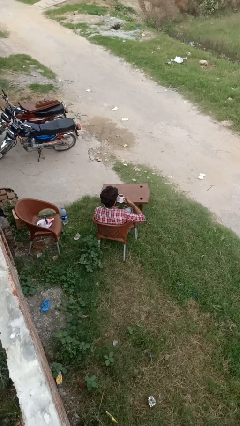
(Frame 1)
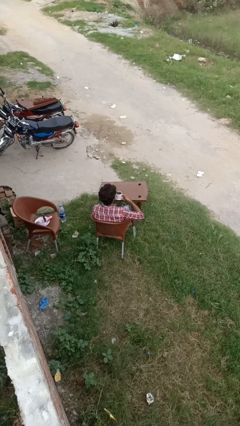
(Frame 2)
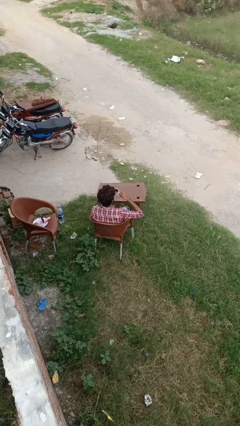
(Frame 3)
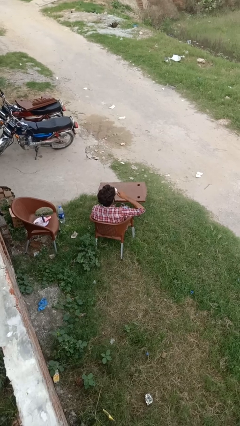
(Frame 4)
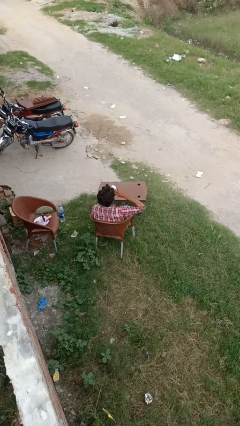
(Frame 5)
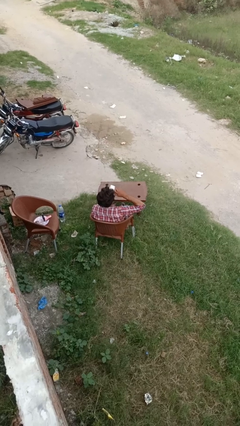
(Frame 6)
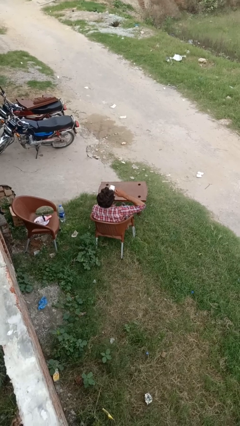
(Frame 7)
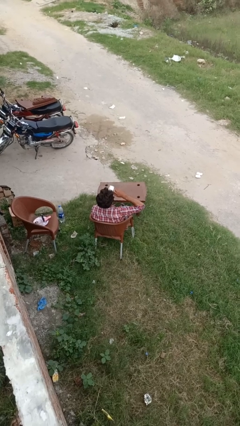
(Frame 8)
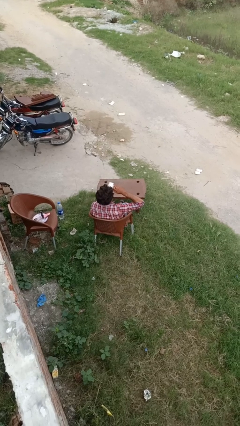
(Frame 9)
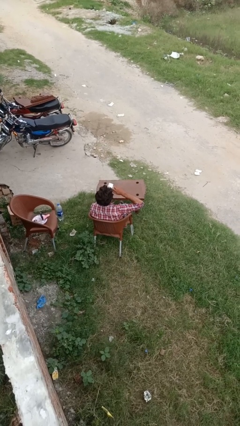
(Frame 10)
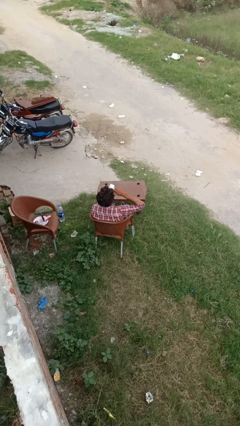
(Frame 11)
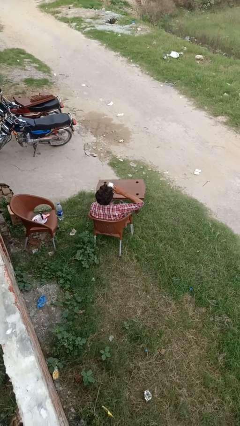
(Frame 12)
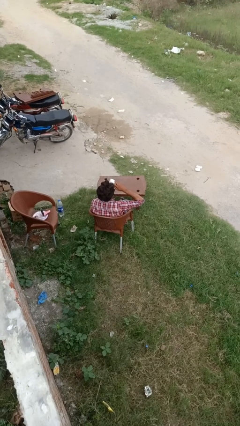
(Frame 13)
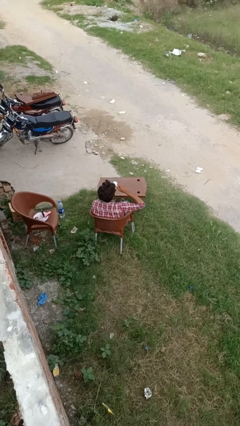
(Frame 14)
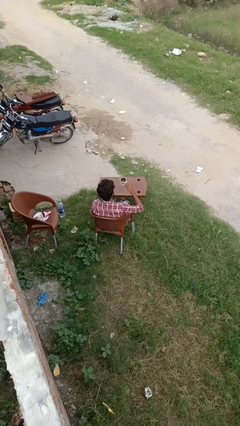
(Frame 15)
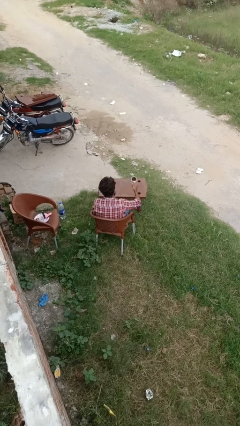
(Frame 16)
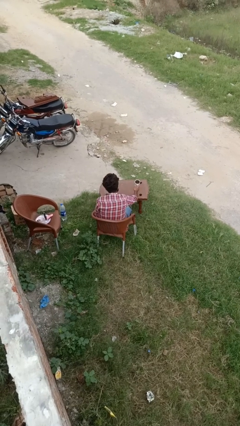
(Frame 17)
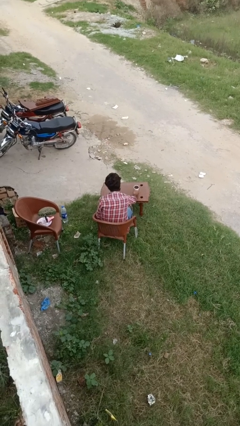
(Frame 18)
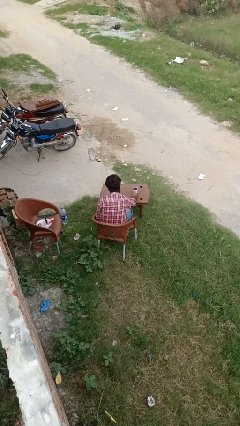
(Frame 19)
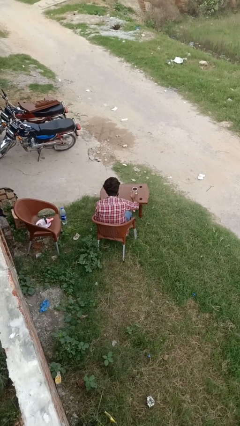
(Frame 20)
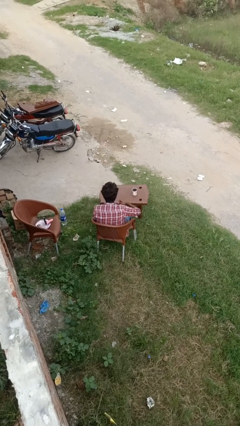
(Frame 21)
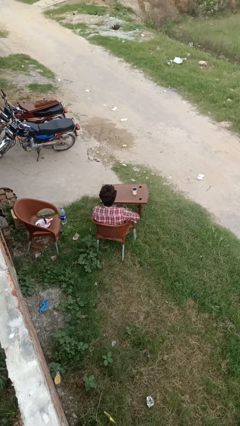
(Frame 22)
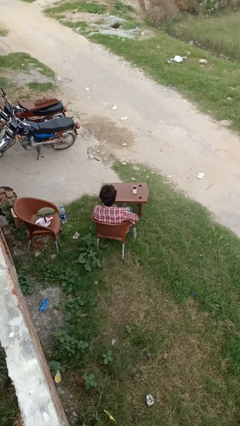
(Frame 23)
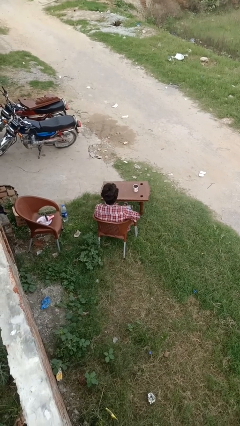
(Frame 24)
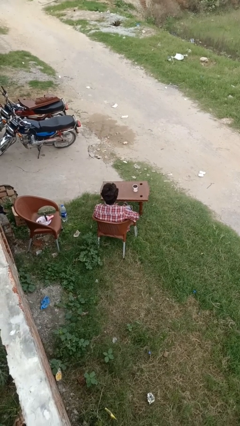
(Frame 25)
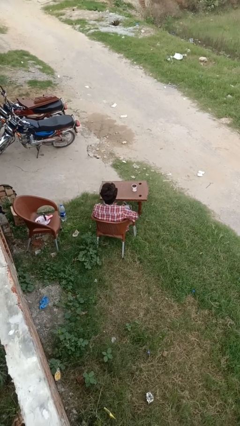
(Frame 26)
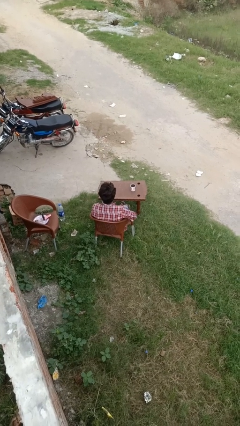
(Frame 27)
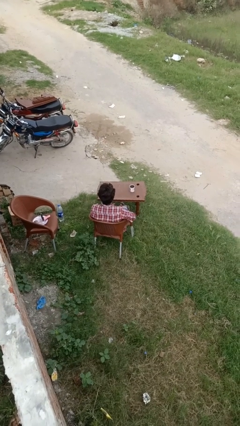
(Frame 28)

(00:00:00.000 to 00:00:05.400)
person drinks from mug

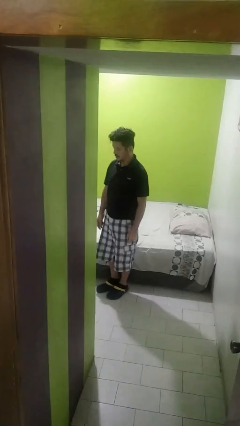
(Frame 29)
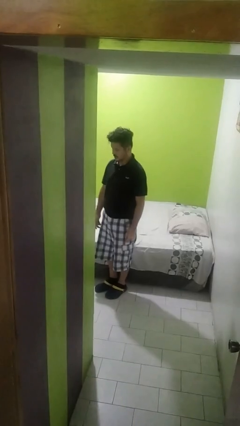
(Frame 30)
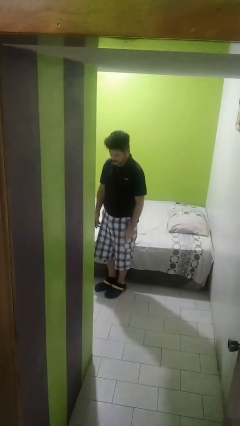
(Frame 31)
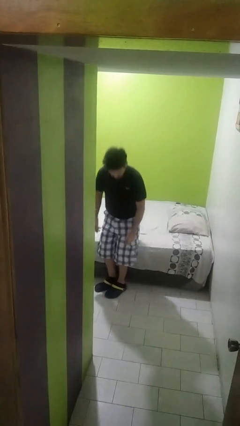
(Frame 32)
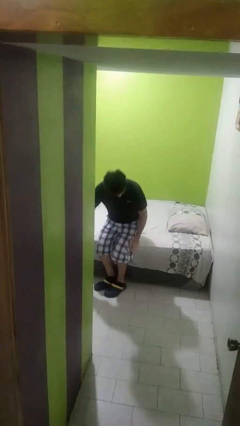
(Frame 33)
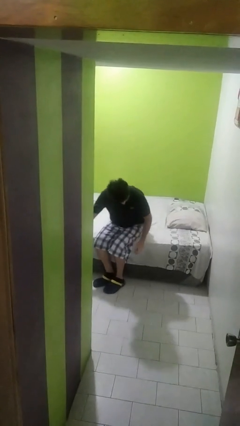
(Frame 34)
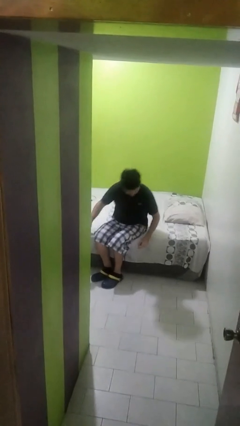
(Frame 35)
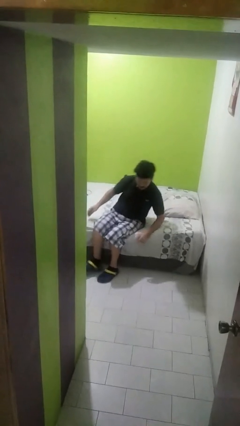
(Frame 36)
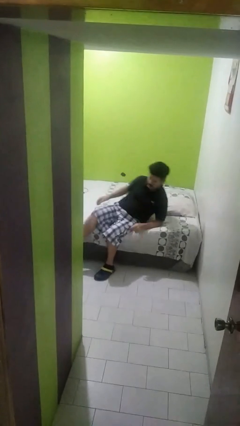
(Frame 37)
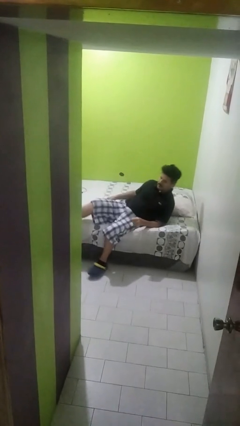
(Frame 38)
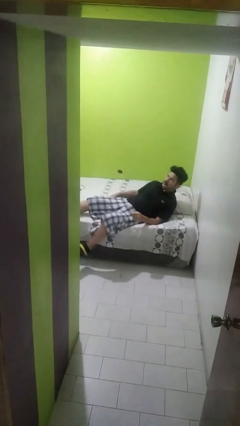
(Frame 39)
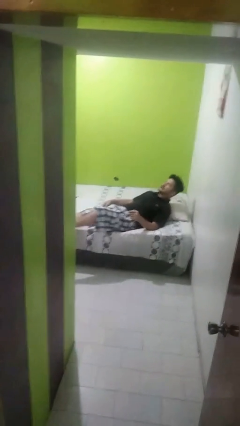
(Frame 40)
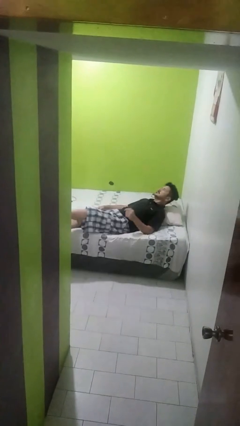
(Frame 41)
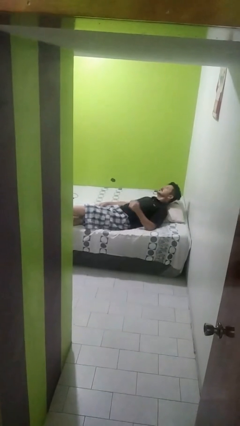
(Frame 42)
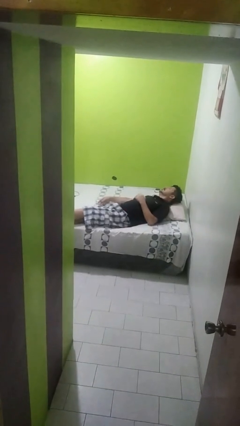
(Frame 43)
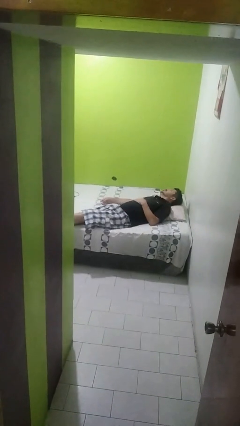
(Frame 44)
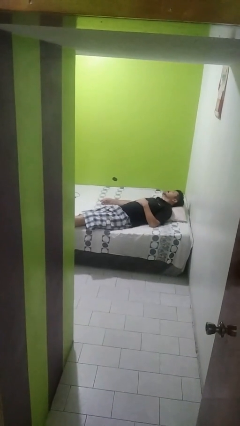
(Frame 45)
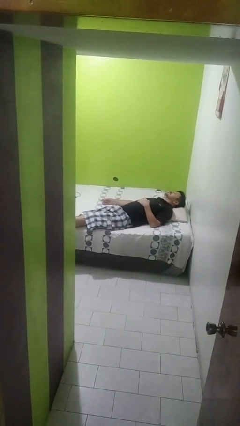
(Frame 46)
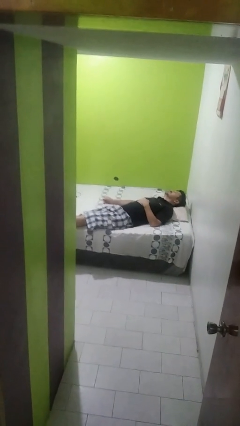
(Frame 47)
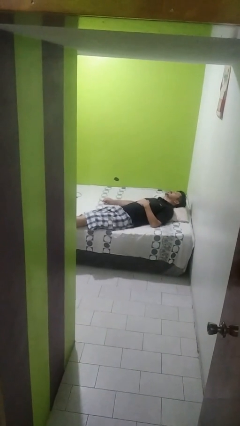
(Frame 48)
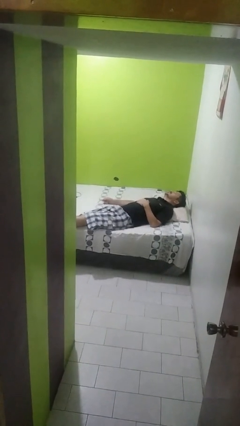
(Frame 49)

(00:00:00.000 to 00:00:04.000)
person lies down on bed

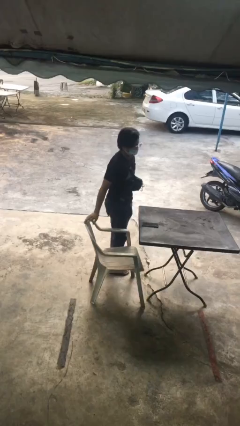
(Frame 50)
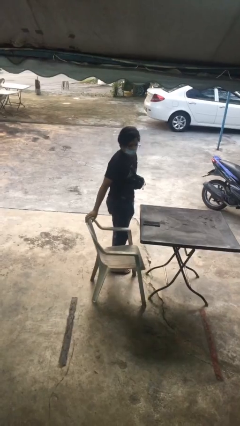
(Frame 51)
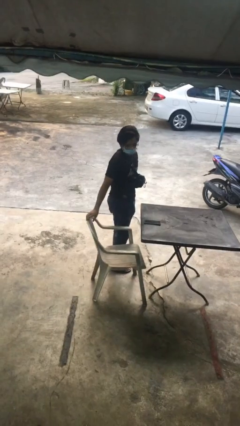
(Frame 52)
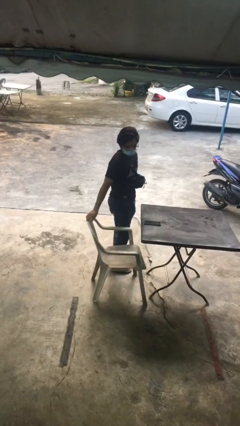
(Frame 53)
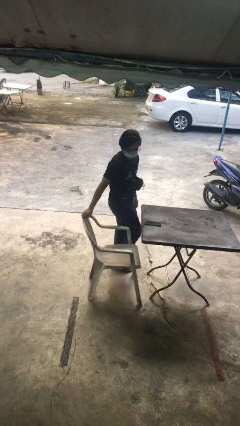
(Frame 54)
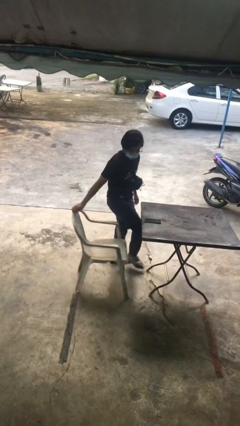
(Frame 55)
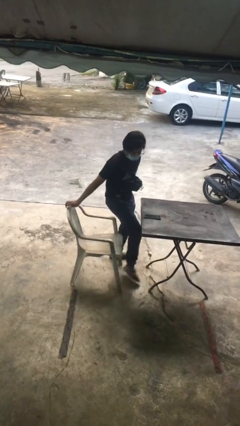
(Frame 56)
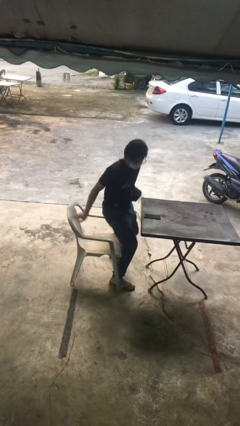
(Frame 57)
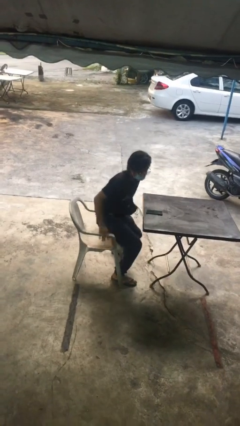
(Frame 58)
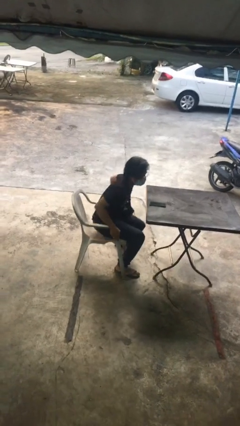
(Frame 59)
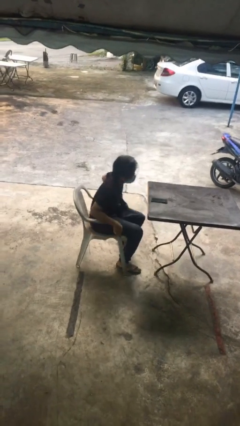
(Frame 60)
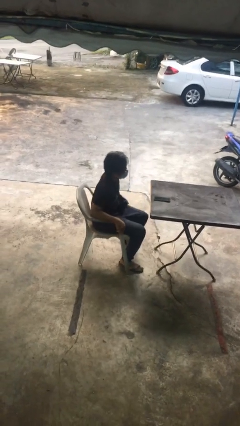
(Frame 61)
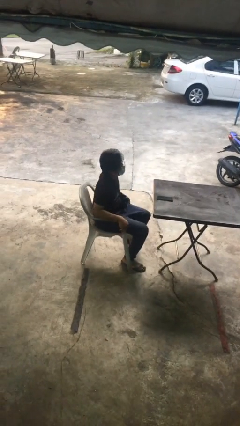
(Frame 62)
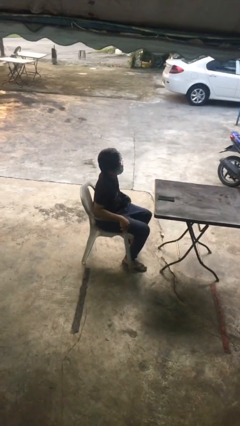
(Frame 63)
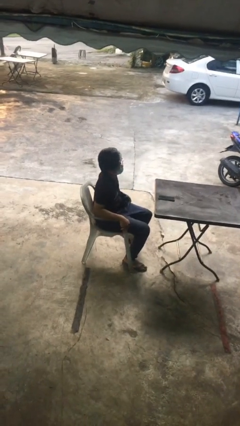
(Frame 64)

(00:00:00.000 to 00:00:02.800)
person sits down

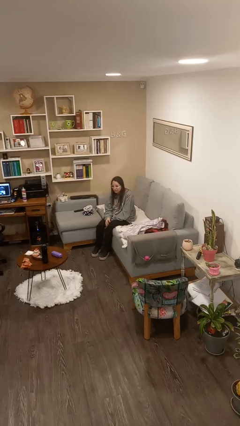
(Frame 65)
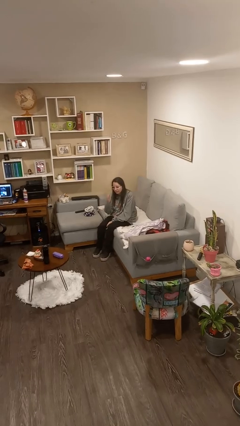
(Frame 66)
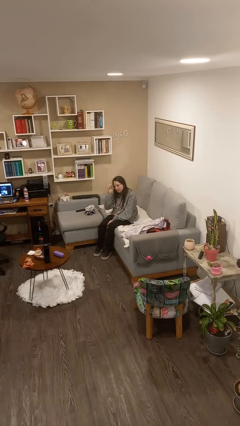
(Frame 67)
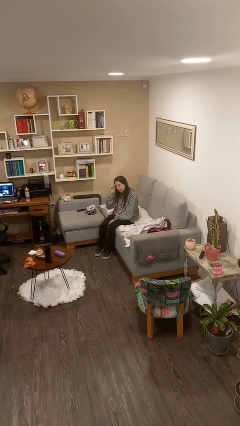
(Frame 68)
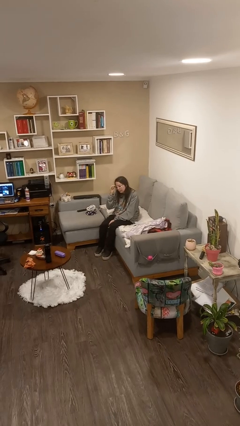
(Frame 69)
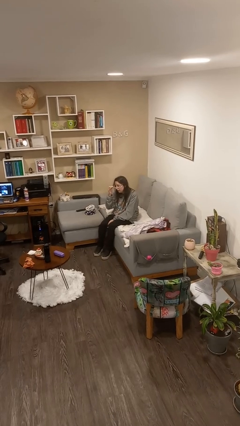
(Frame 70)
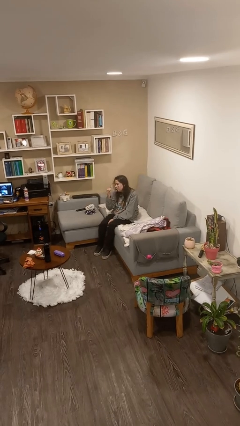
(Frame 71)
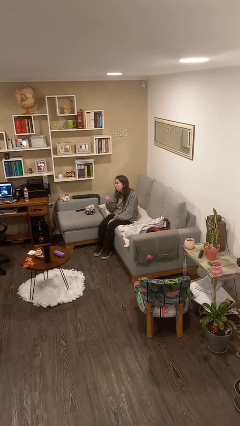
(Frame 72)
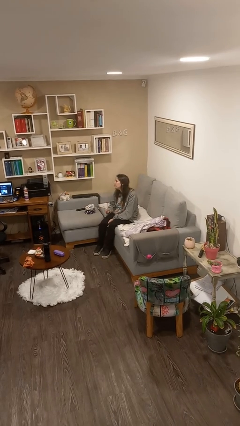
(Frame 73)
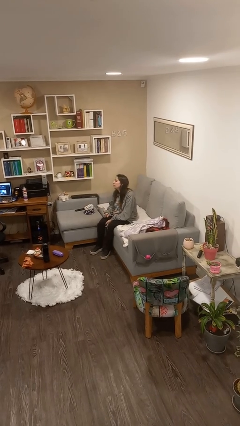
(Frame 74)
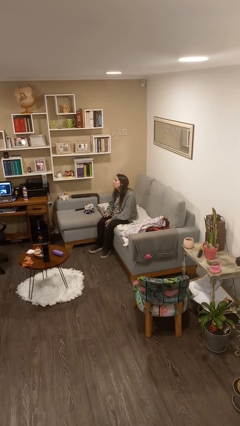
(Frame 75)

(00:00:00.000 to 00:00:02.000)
person takes off glasses

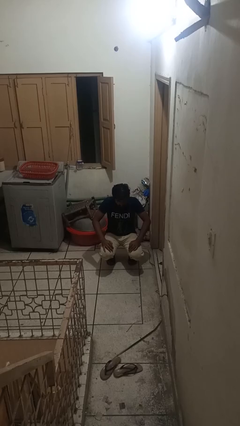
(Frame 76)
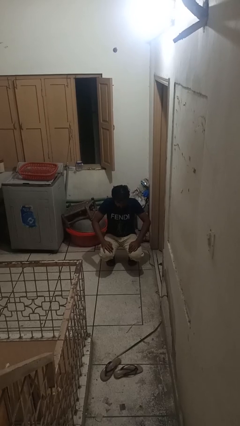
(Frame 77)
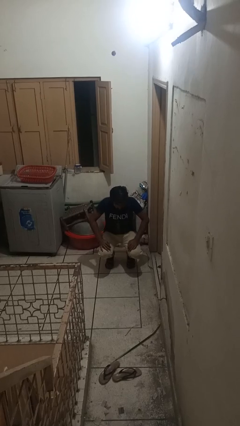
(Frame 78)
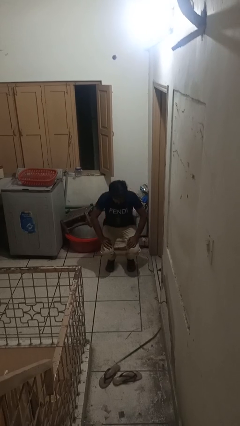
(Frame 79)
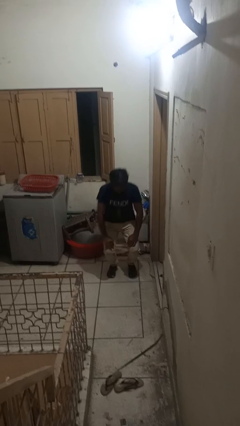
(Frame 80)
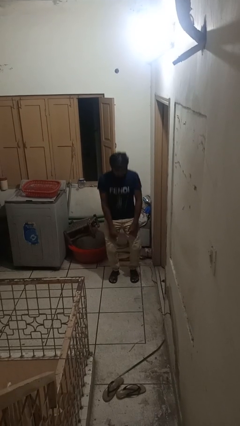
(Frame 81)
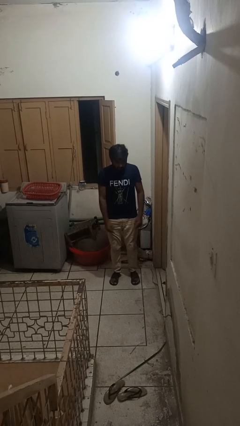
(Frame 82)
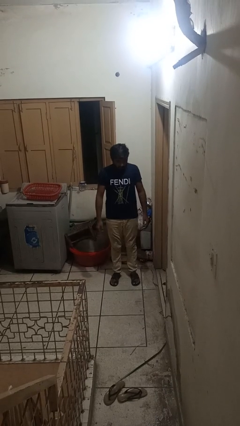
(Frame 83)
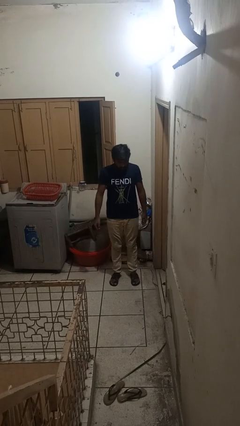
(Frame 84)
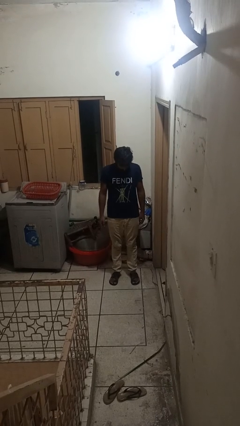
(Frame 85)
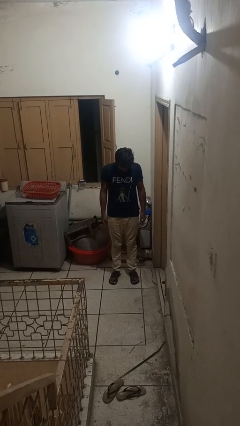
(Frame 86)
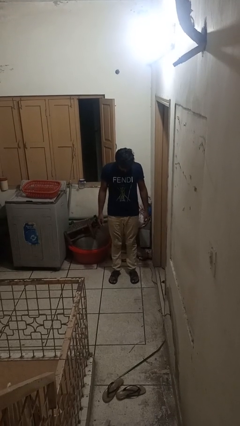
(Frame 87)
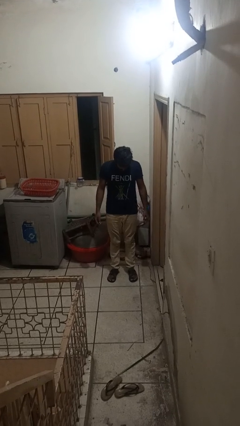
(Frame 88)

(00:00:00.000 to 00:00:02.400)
person stands up

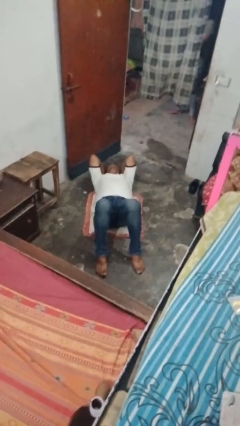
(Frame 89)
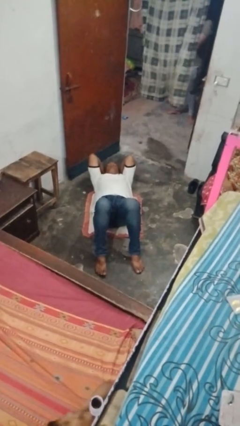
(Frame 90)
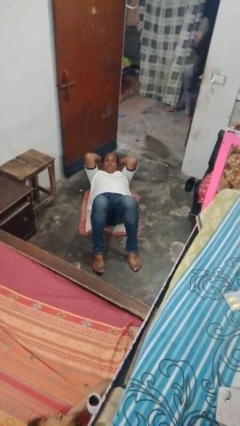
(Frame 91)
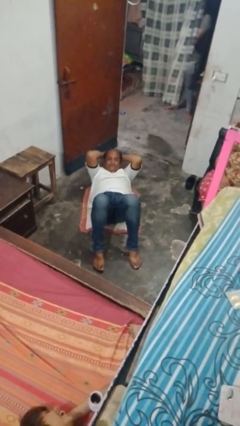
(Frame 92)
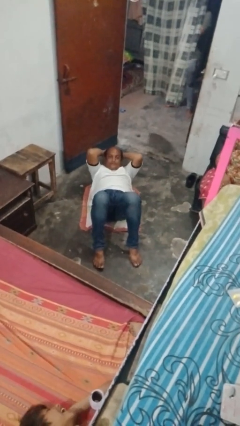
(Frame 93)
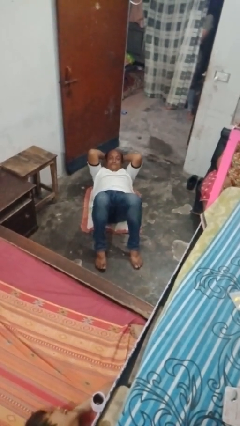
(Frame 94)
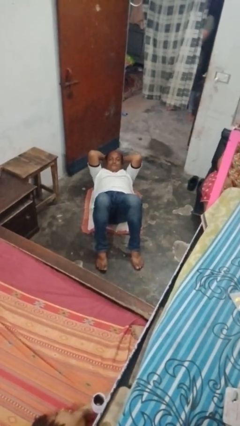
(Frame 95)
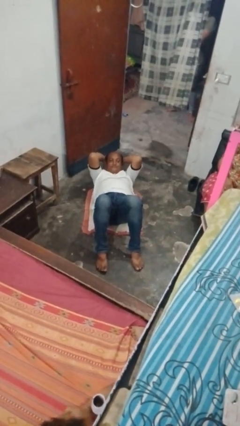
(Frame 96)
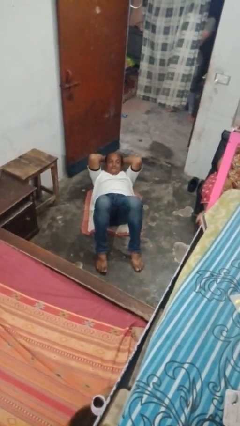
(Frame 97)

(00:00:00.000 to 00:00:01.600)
person exercises with situp
